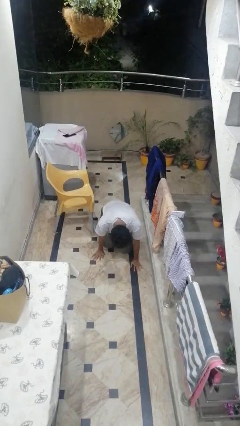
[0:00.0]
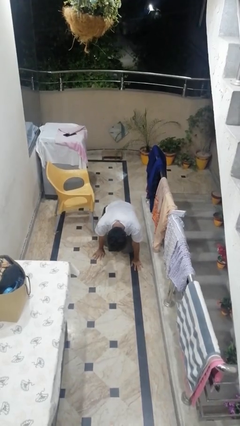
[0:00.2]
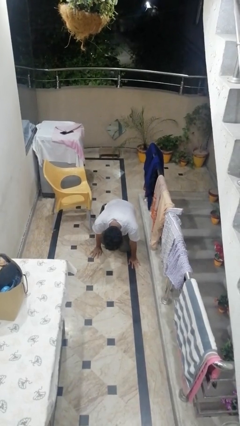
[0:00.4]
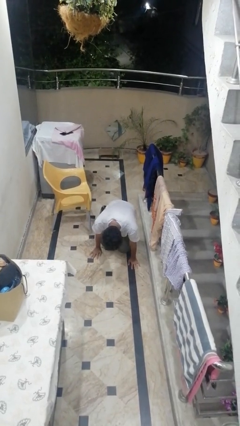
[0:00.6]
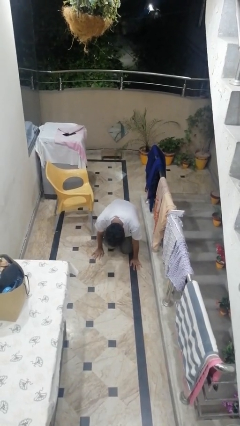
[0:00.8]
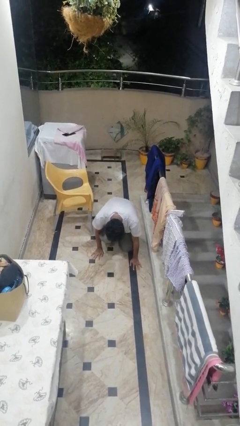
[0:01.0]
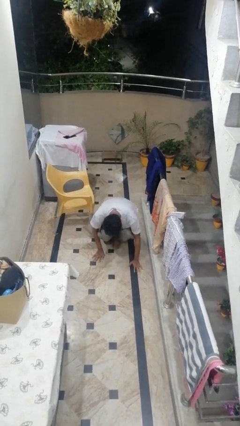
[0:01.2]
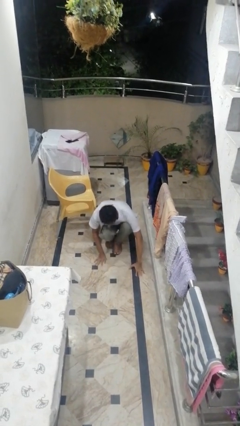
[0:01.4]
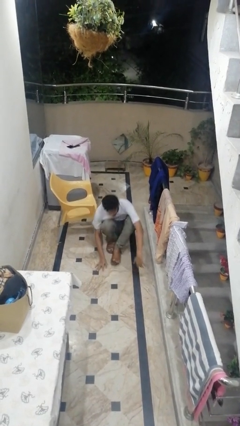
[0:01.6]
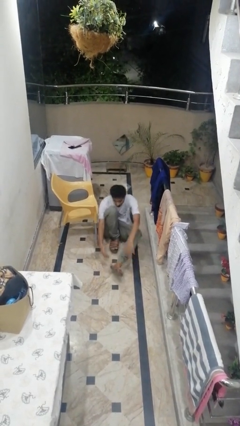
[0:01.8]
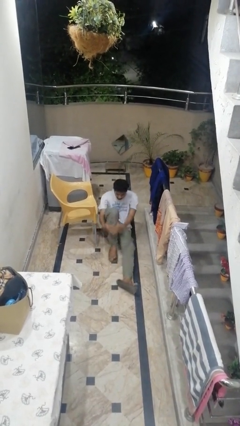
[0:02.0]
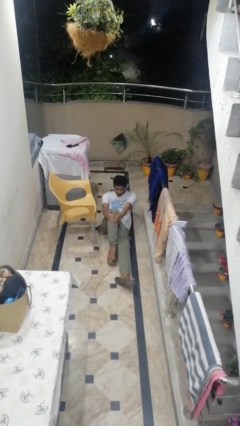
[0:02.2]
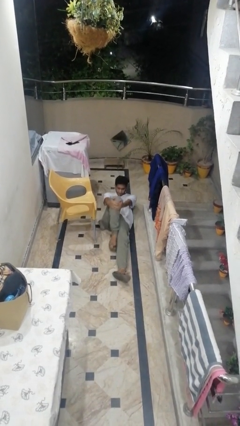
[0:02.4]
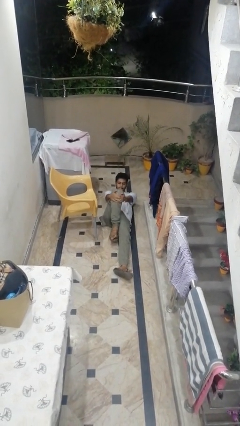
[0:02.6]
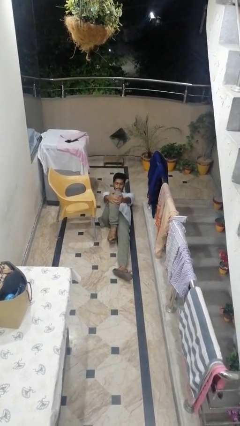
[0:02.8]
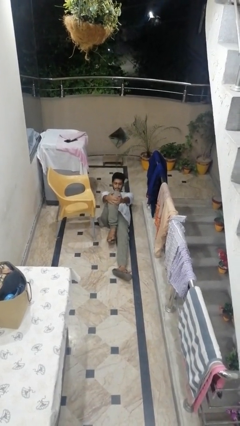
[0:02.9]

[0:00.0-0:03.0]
person lies down on floor

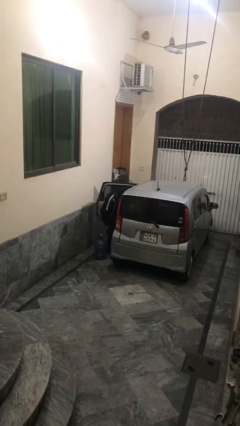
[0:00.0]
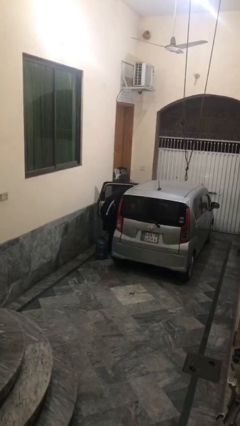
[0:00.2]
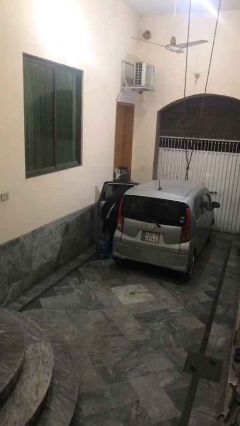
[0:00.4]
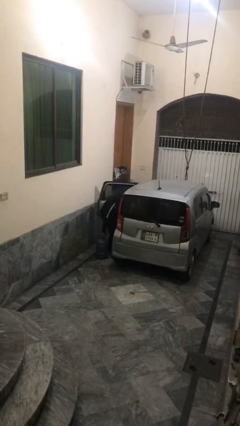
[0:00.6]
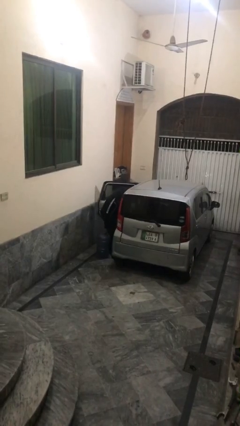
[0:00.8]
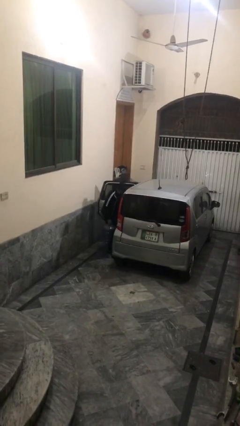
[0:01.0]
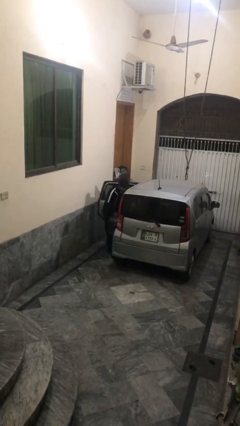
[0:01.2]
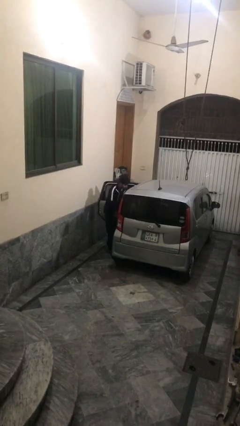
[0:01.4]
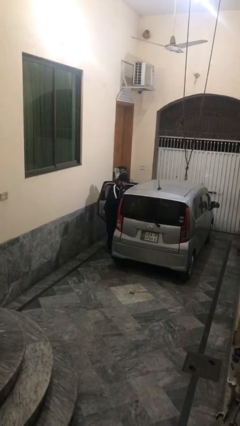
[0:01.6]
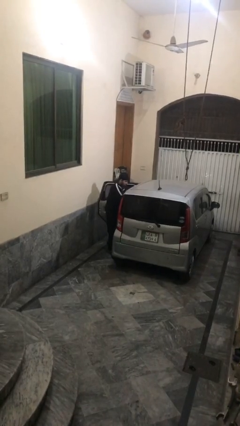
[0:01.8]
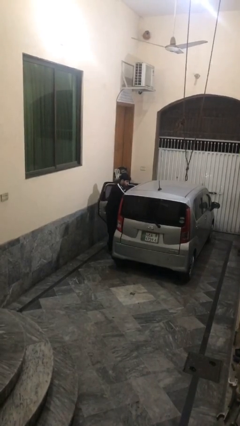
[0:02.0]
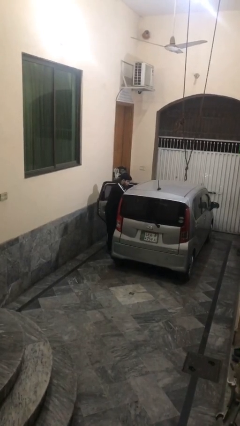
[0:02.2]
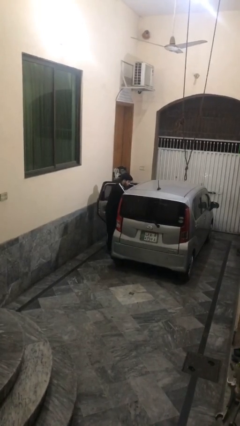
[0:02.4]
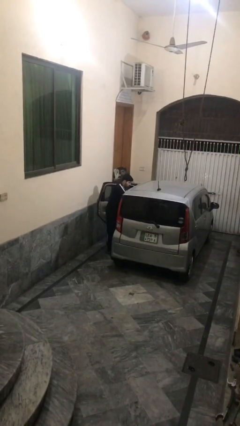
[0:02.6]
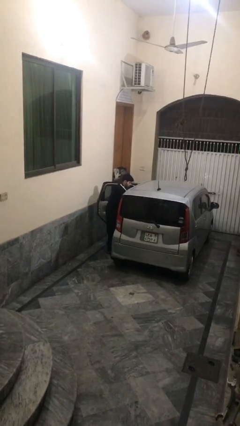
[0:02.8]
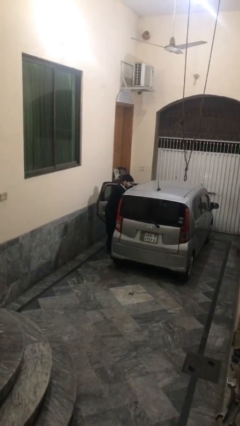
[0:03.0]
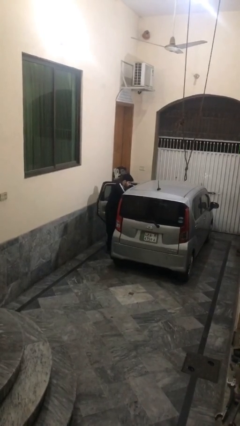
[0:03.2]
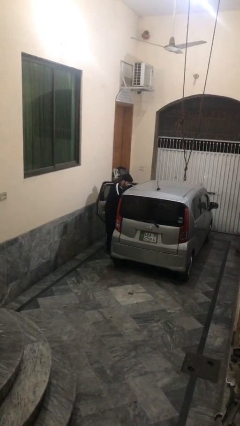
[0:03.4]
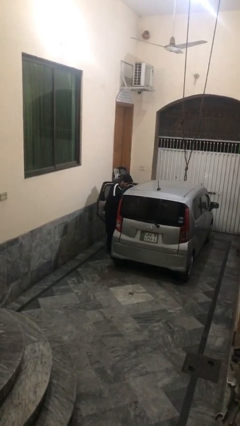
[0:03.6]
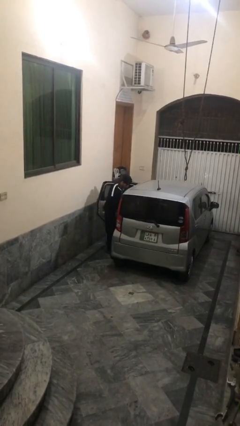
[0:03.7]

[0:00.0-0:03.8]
person loads car

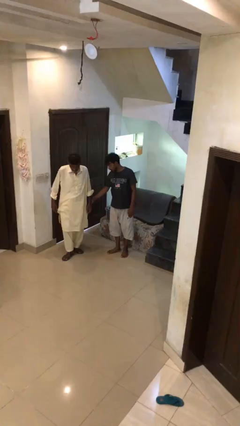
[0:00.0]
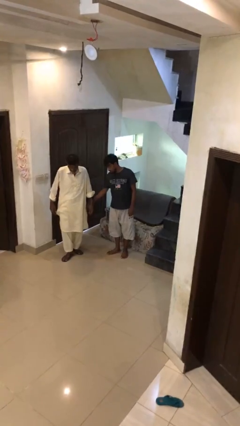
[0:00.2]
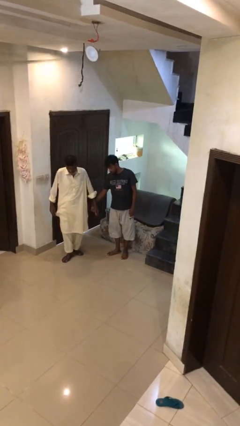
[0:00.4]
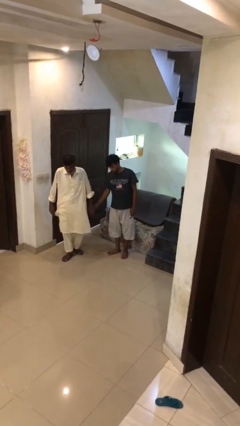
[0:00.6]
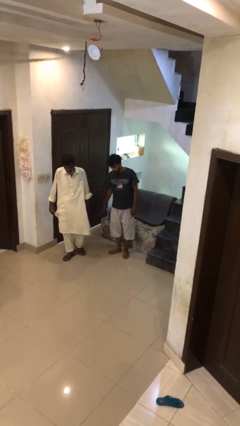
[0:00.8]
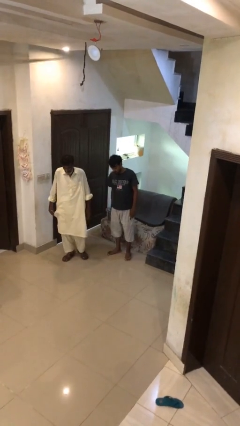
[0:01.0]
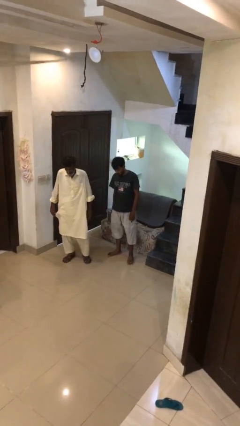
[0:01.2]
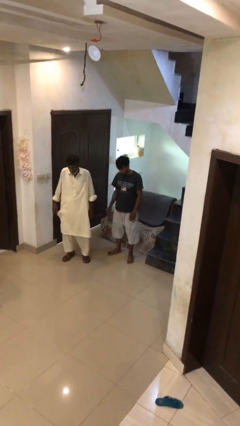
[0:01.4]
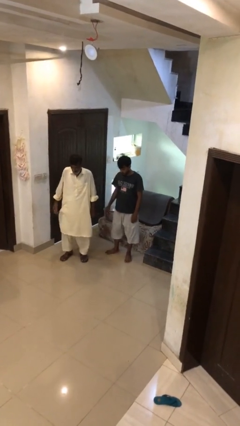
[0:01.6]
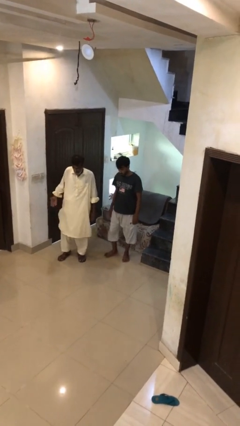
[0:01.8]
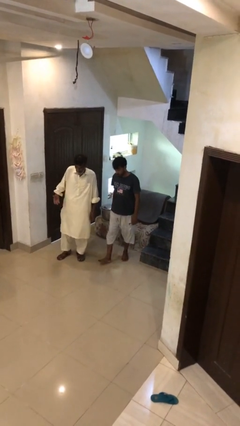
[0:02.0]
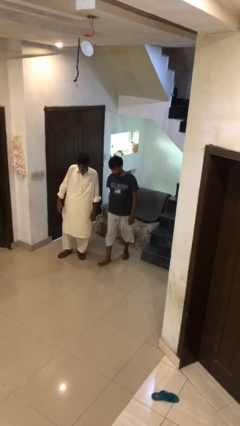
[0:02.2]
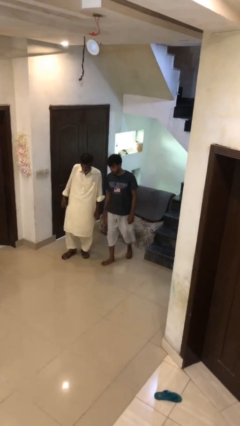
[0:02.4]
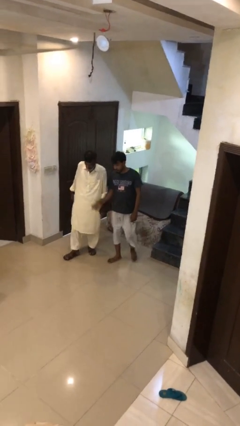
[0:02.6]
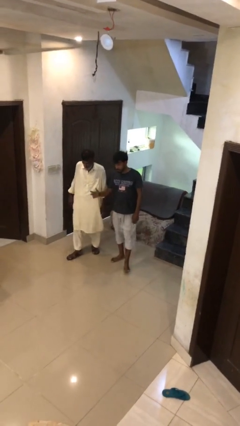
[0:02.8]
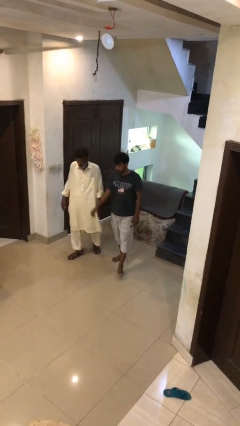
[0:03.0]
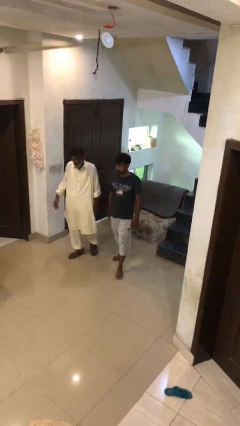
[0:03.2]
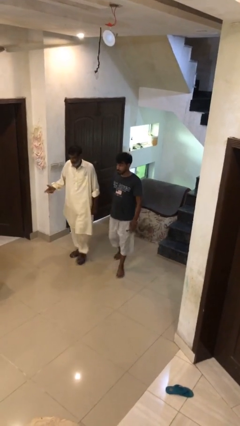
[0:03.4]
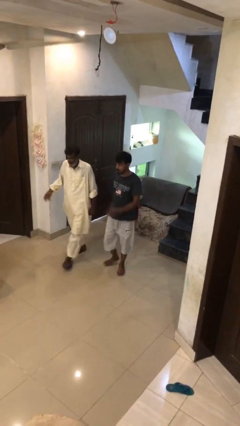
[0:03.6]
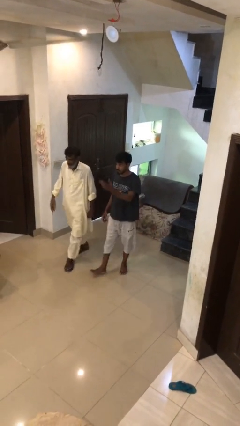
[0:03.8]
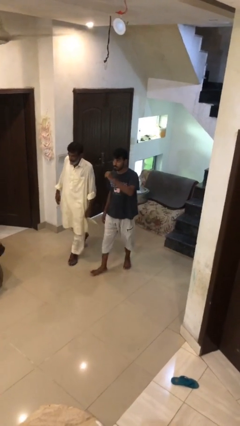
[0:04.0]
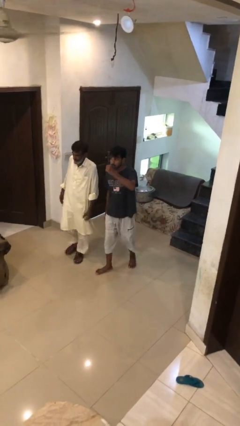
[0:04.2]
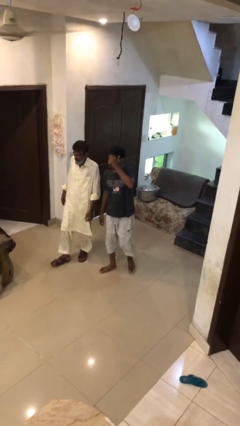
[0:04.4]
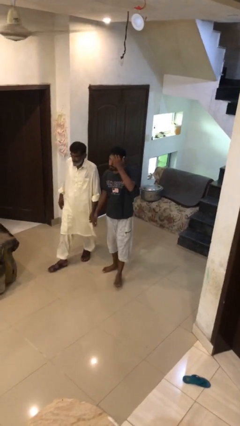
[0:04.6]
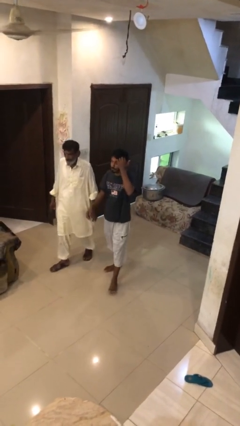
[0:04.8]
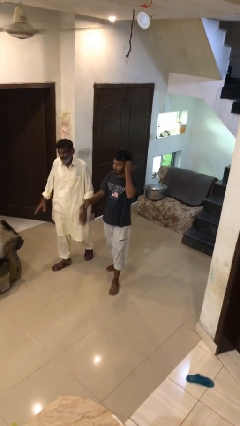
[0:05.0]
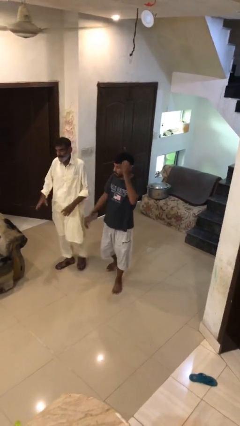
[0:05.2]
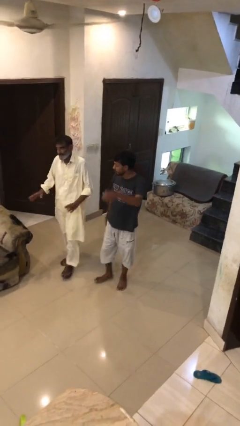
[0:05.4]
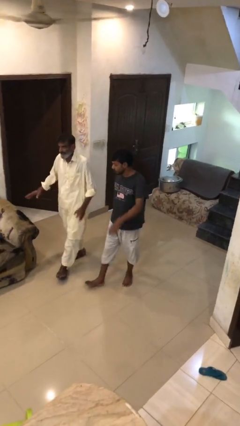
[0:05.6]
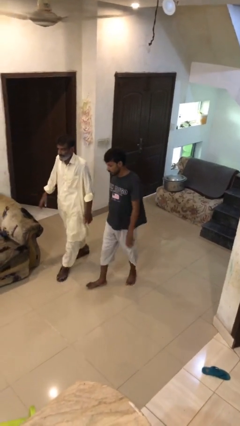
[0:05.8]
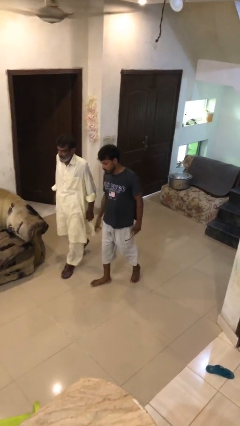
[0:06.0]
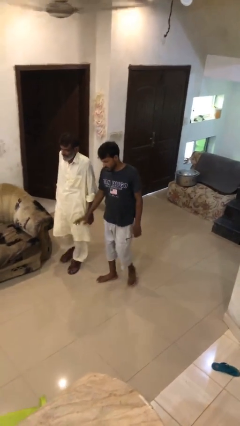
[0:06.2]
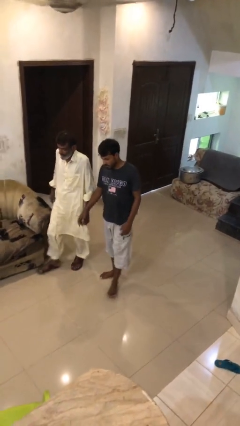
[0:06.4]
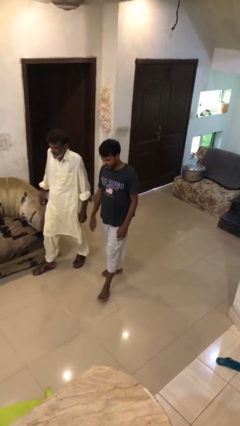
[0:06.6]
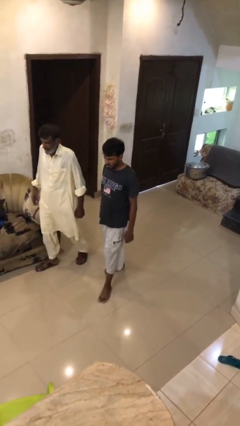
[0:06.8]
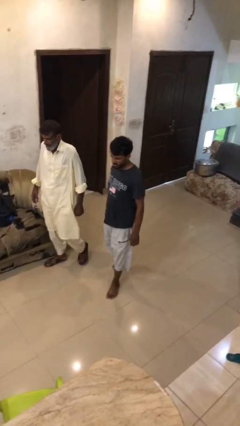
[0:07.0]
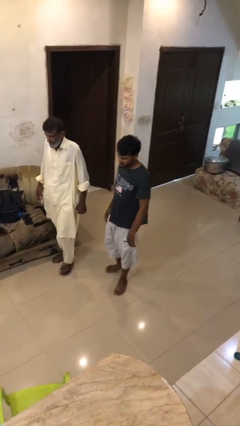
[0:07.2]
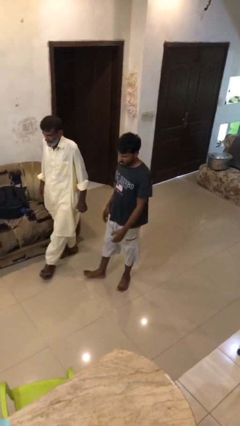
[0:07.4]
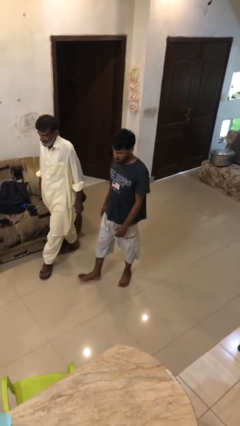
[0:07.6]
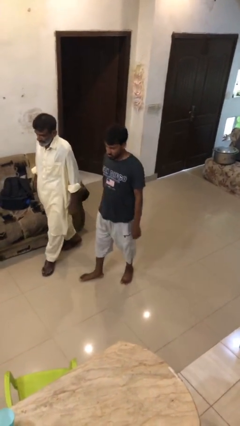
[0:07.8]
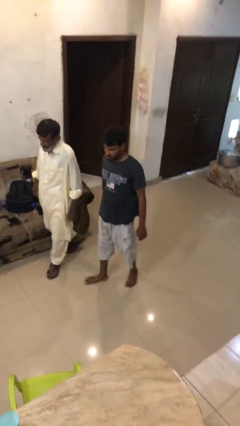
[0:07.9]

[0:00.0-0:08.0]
person talks to person

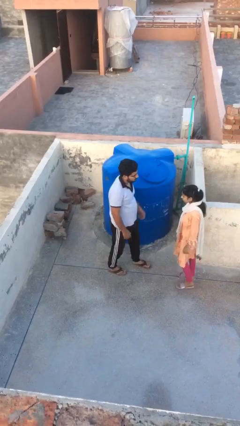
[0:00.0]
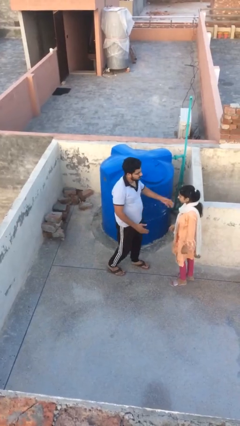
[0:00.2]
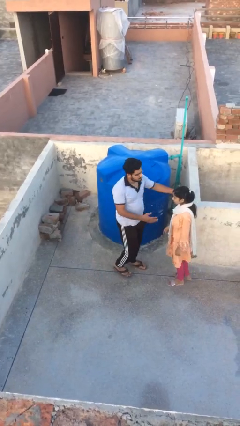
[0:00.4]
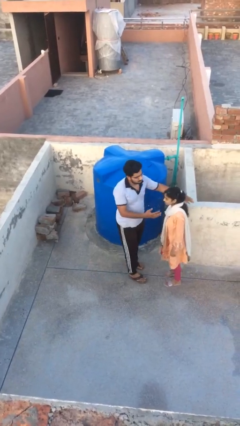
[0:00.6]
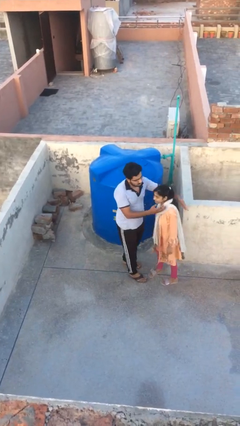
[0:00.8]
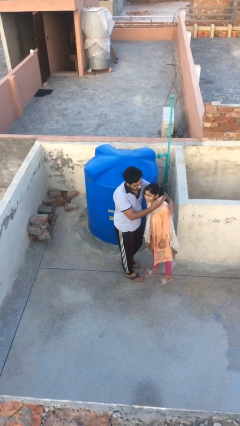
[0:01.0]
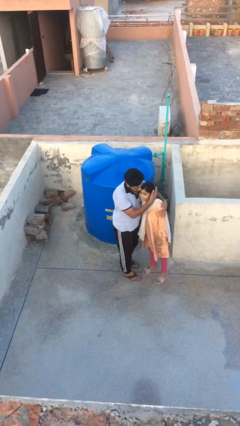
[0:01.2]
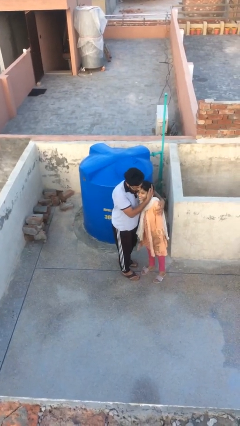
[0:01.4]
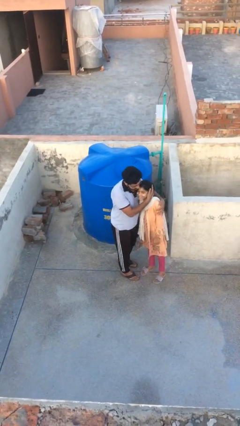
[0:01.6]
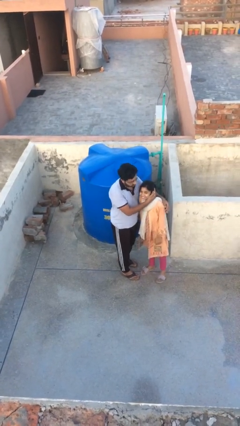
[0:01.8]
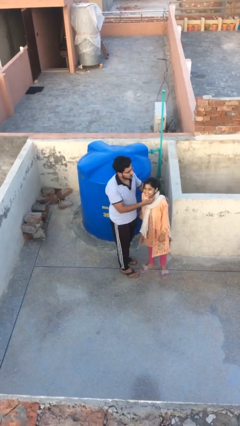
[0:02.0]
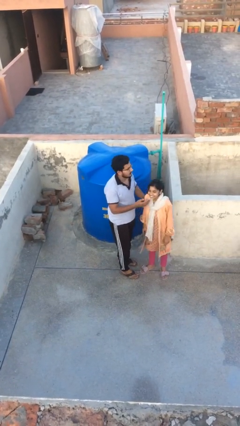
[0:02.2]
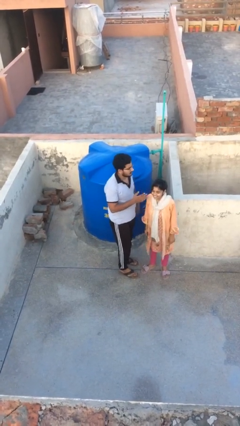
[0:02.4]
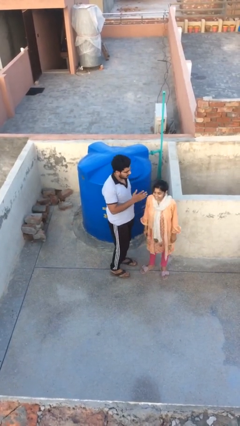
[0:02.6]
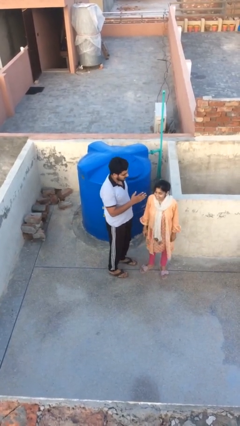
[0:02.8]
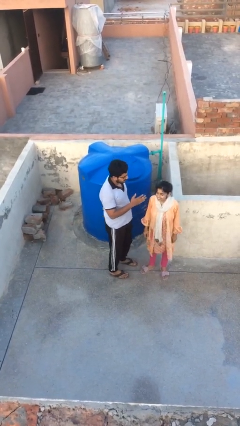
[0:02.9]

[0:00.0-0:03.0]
person embraces person

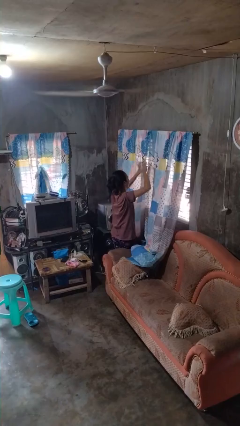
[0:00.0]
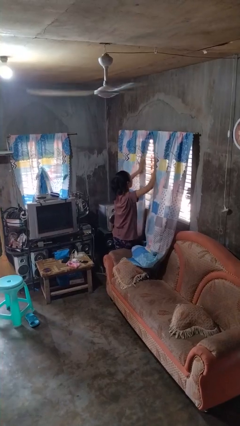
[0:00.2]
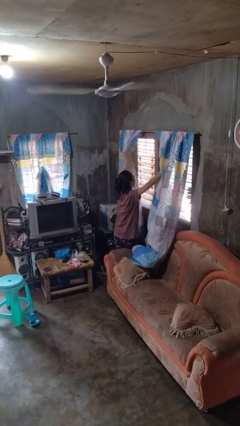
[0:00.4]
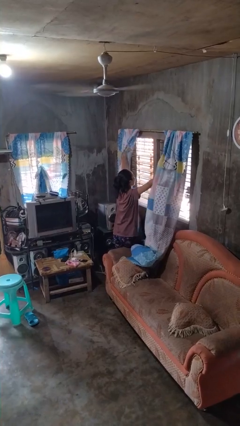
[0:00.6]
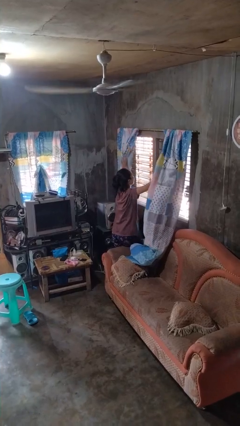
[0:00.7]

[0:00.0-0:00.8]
person opens curtains
